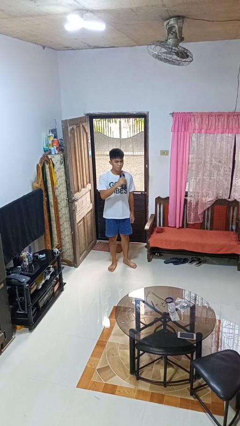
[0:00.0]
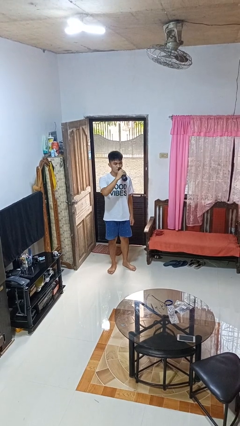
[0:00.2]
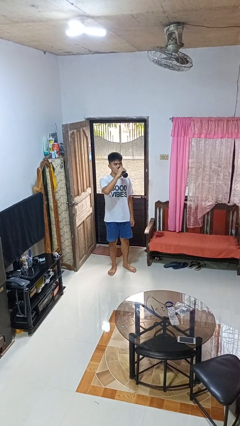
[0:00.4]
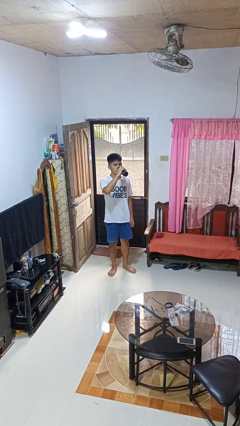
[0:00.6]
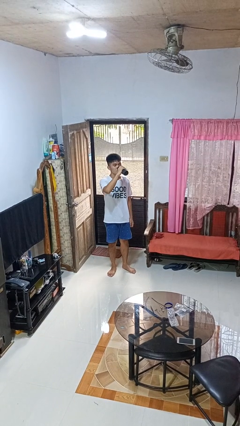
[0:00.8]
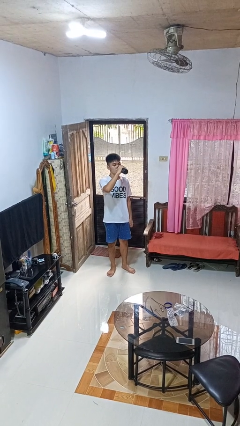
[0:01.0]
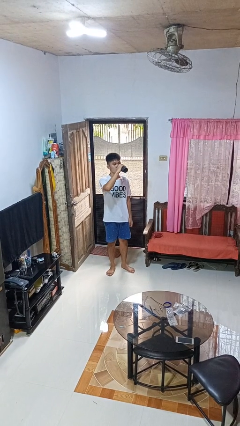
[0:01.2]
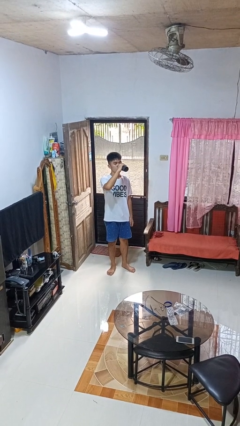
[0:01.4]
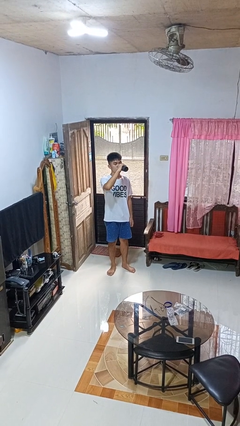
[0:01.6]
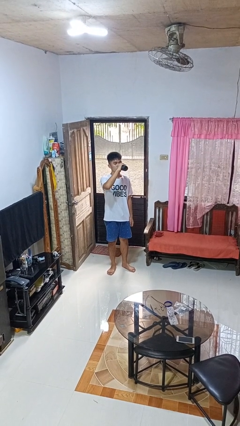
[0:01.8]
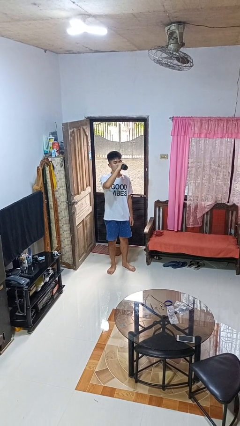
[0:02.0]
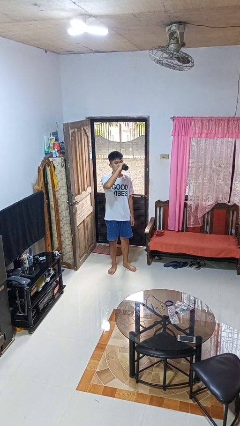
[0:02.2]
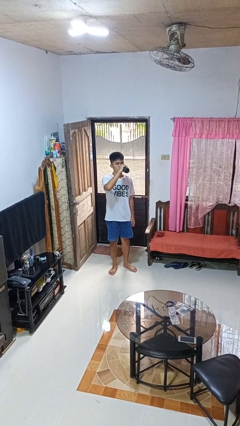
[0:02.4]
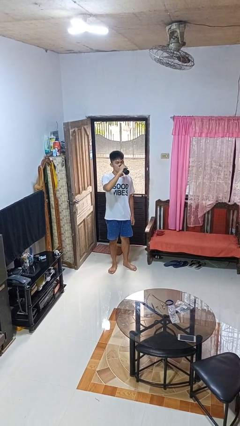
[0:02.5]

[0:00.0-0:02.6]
person drinks from bottle

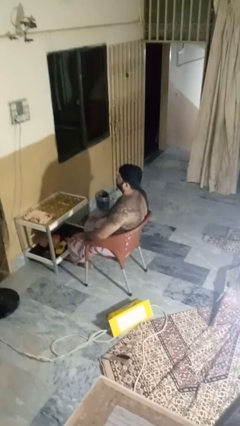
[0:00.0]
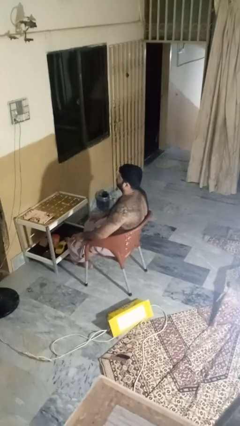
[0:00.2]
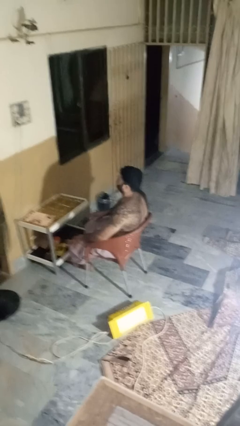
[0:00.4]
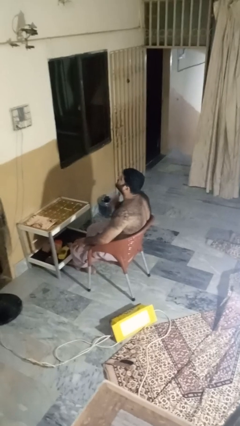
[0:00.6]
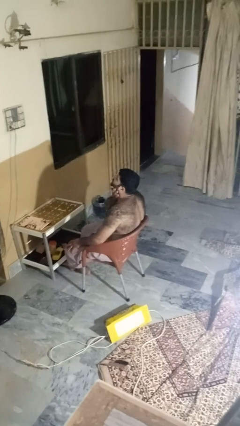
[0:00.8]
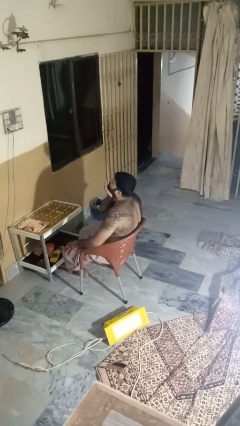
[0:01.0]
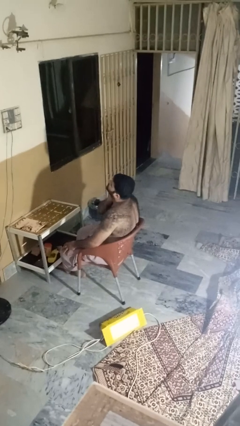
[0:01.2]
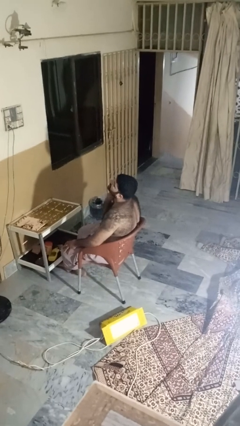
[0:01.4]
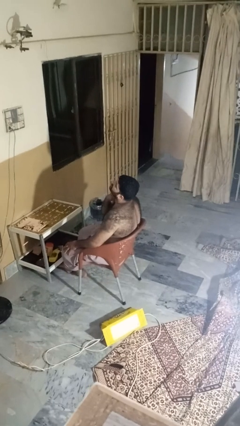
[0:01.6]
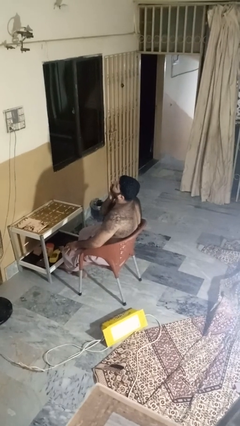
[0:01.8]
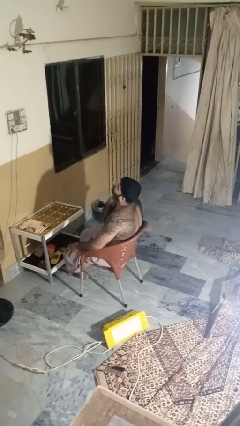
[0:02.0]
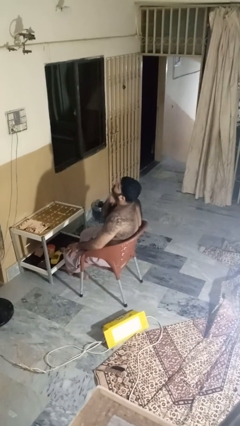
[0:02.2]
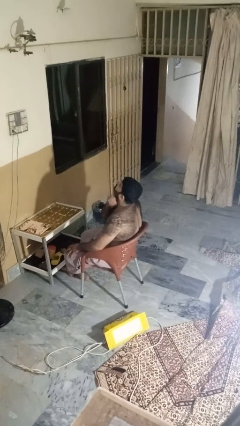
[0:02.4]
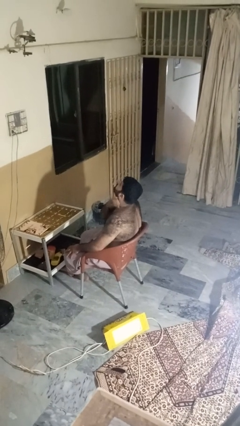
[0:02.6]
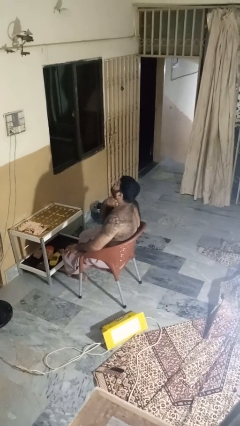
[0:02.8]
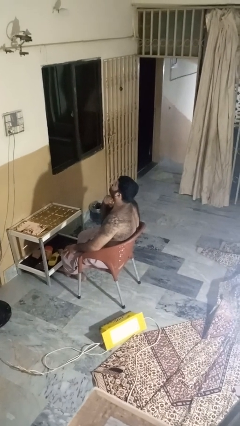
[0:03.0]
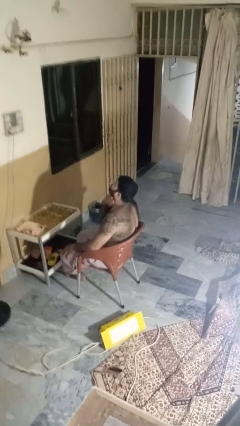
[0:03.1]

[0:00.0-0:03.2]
person rubs neck

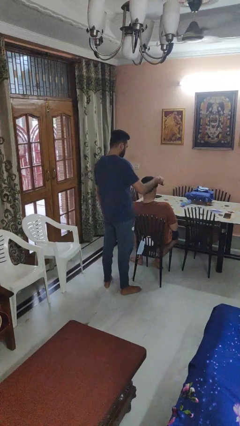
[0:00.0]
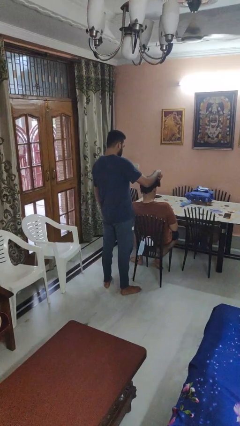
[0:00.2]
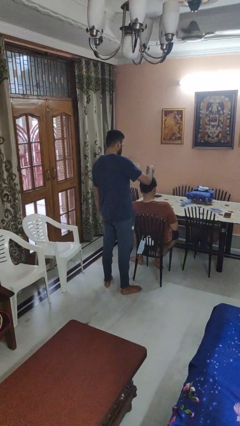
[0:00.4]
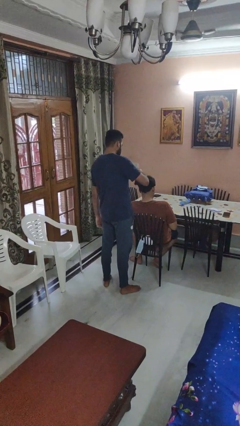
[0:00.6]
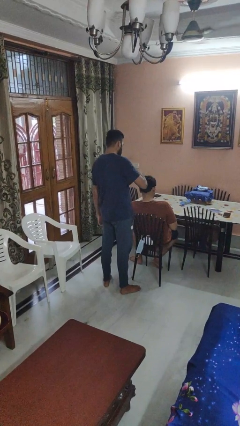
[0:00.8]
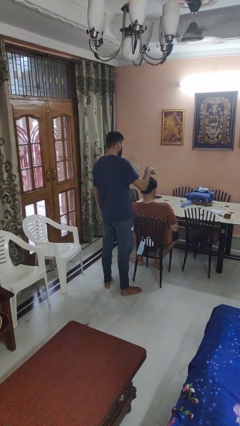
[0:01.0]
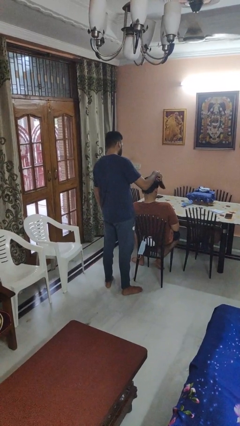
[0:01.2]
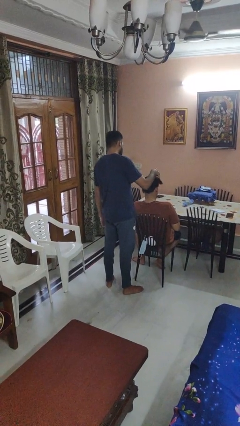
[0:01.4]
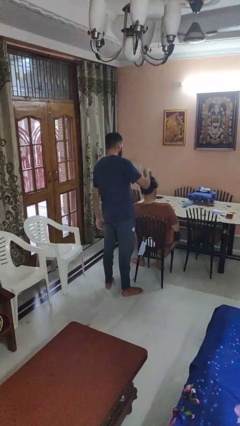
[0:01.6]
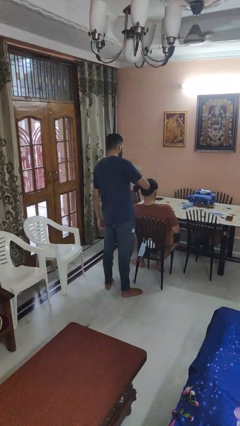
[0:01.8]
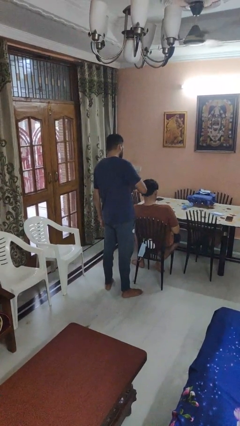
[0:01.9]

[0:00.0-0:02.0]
person brushes hair of person

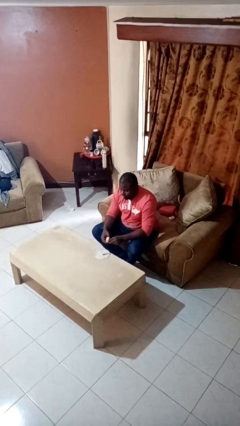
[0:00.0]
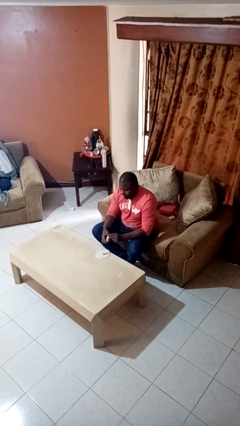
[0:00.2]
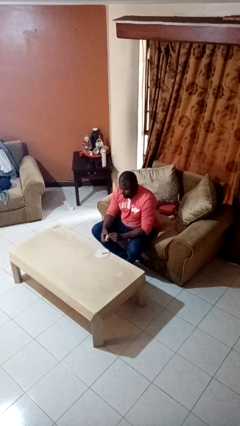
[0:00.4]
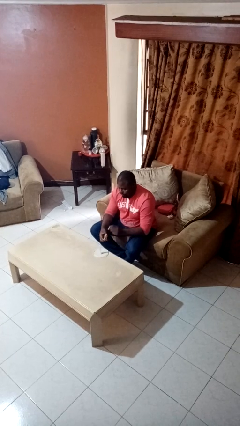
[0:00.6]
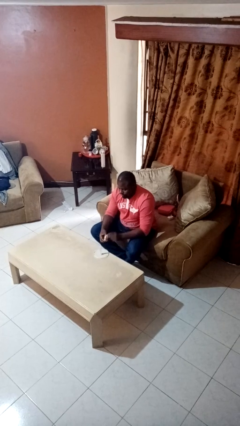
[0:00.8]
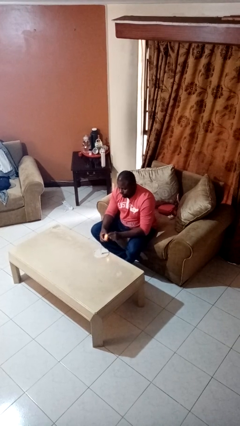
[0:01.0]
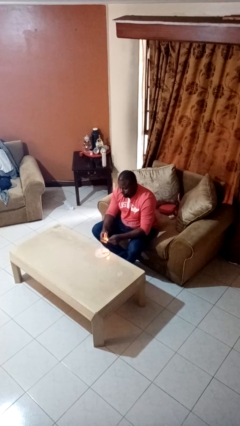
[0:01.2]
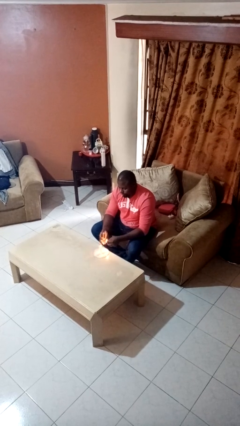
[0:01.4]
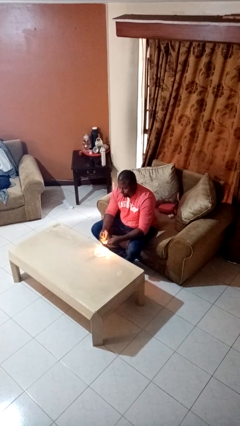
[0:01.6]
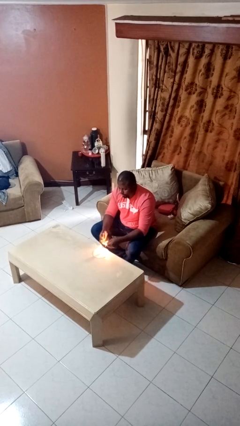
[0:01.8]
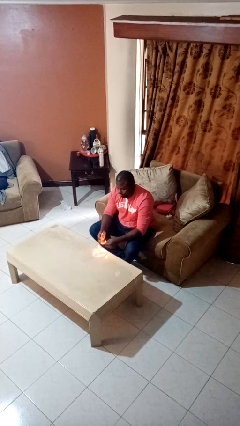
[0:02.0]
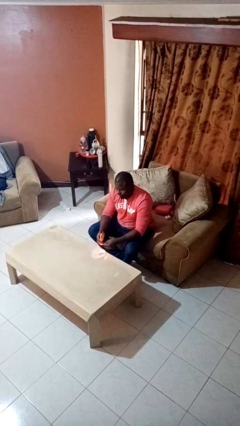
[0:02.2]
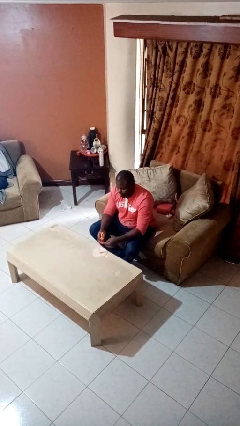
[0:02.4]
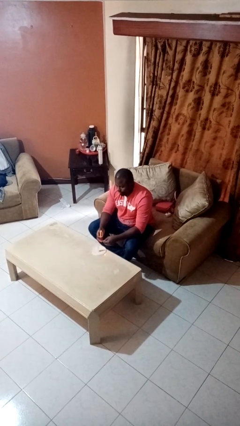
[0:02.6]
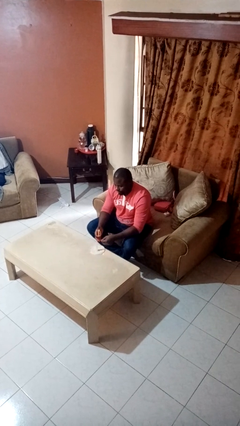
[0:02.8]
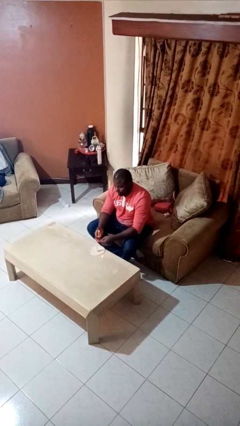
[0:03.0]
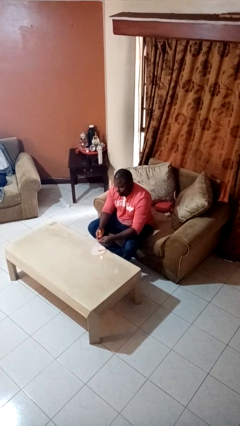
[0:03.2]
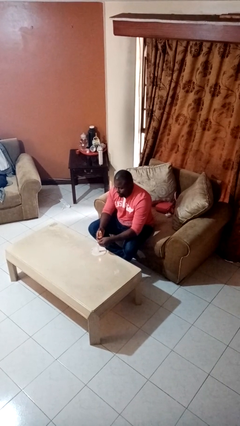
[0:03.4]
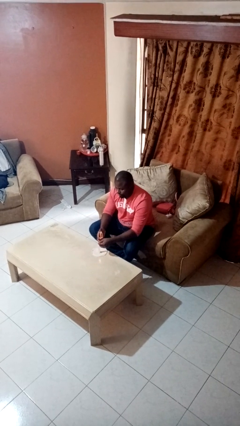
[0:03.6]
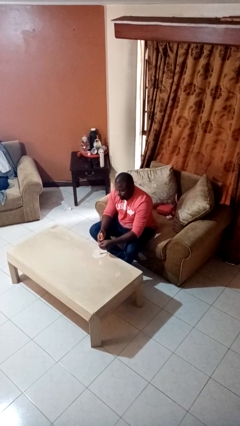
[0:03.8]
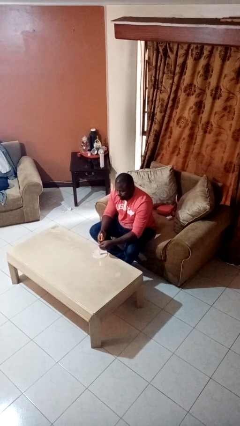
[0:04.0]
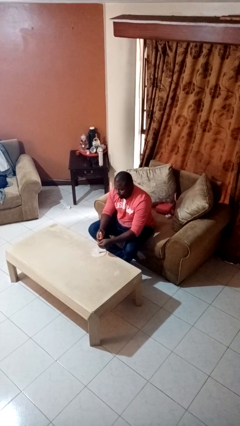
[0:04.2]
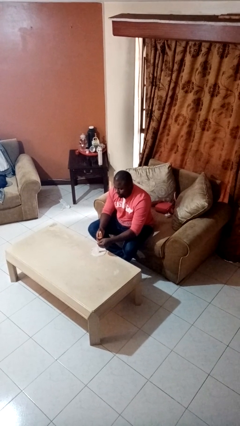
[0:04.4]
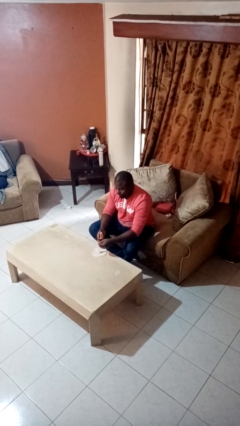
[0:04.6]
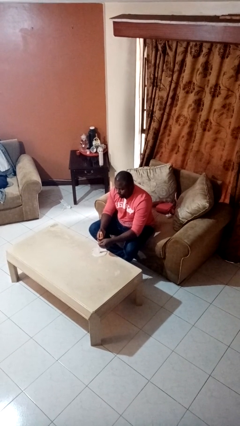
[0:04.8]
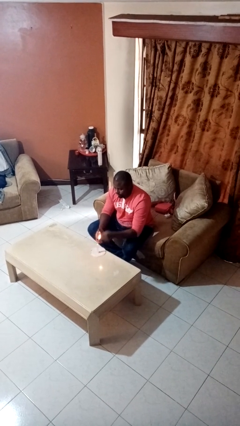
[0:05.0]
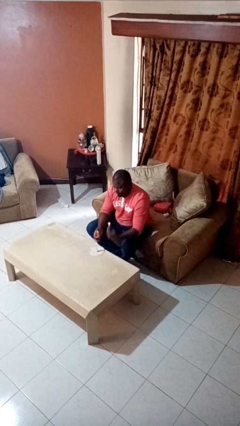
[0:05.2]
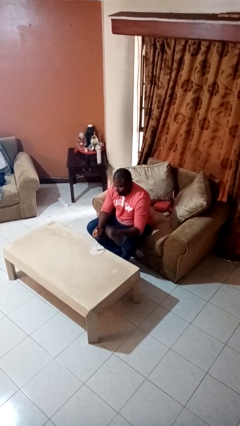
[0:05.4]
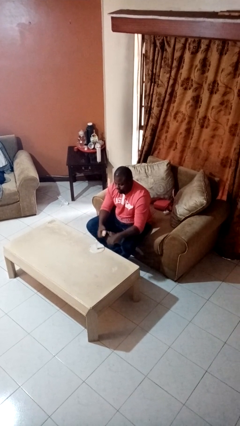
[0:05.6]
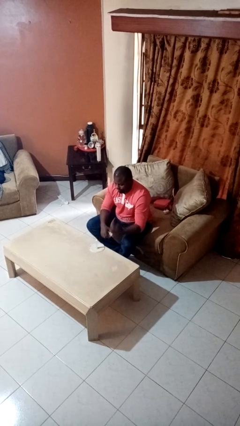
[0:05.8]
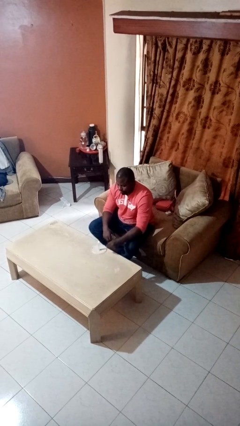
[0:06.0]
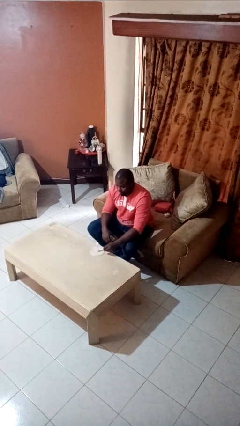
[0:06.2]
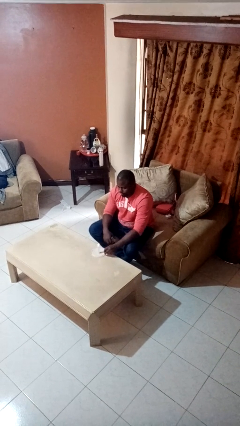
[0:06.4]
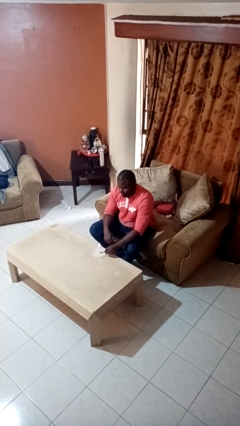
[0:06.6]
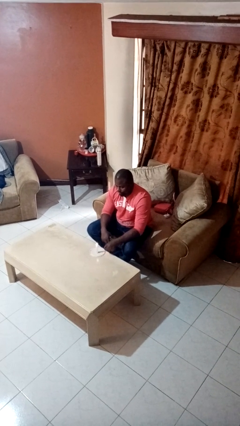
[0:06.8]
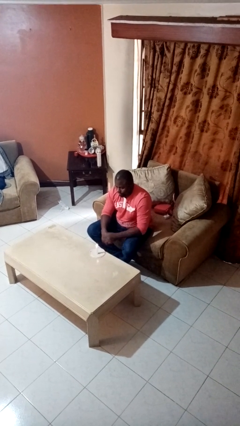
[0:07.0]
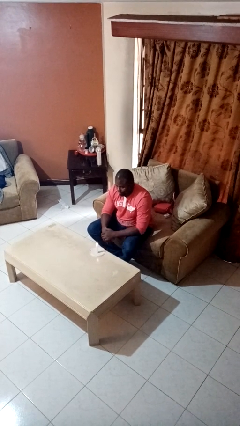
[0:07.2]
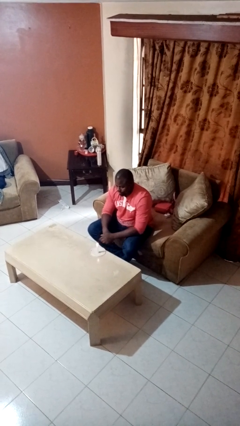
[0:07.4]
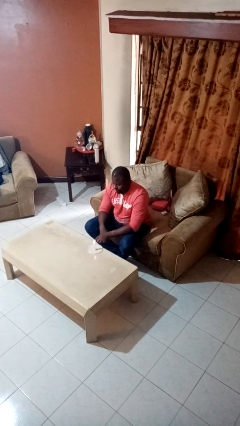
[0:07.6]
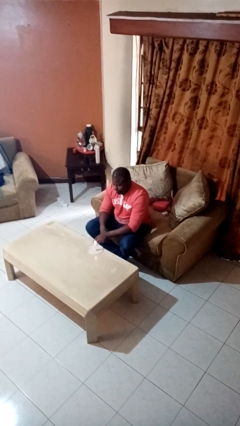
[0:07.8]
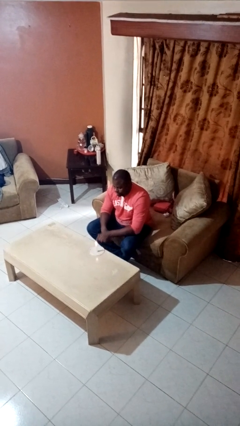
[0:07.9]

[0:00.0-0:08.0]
person lights candle

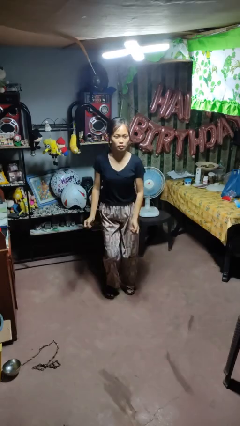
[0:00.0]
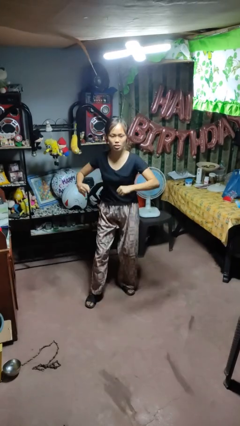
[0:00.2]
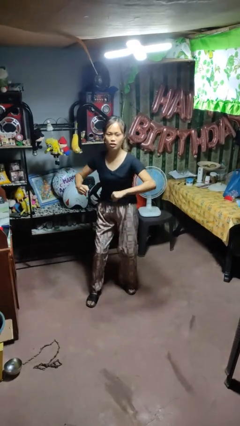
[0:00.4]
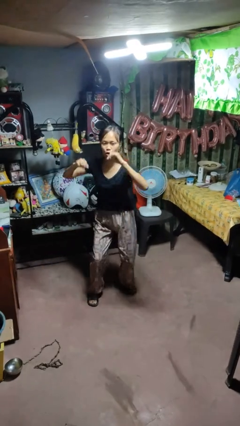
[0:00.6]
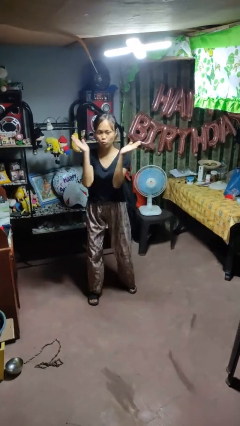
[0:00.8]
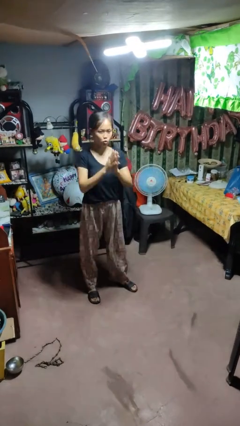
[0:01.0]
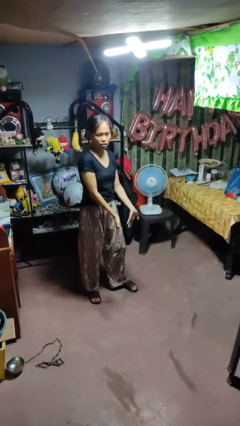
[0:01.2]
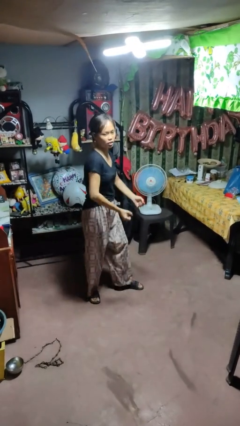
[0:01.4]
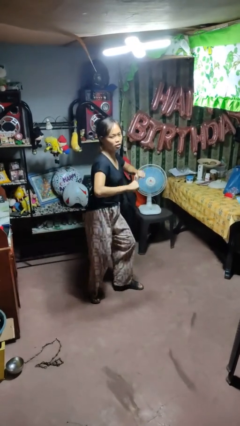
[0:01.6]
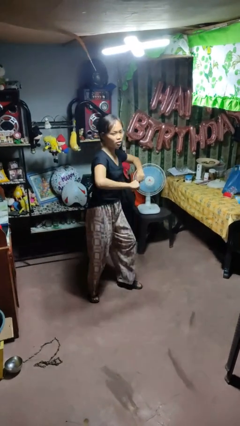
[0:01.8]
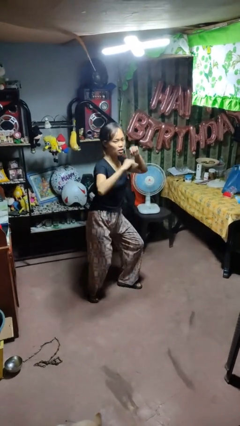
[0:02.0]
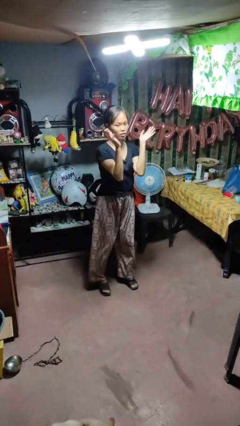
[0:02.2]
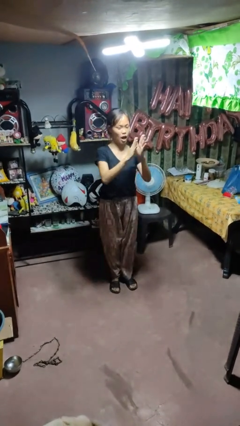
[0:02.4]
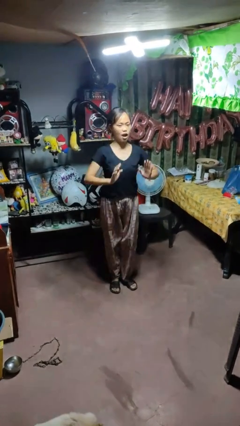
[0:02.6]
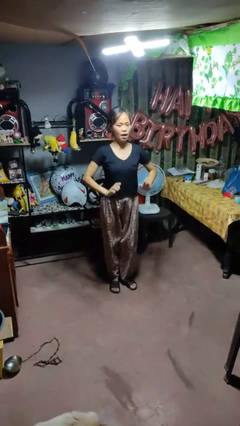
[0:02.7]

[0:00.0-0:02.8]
person dances in place
